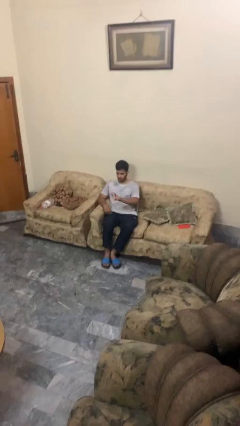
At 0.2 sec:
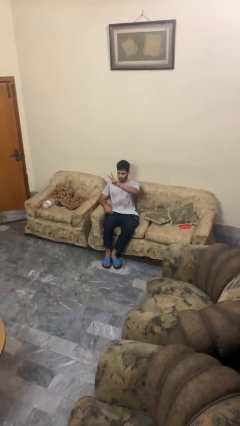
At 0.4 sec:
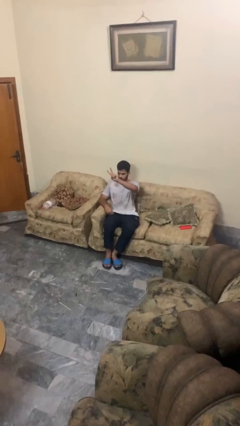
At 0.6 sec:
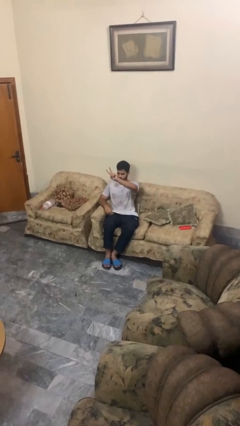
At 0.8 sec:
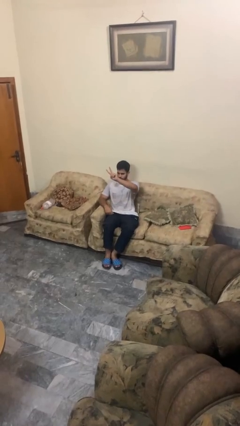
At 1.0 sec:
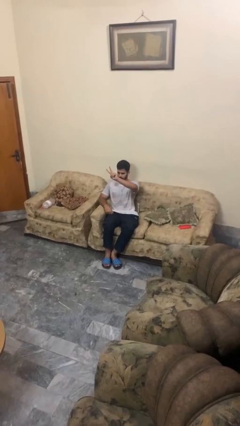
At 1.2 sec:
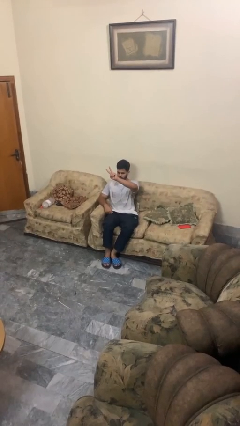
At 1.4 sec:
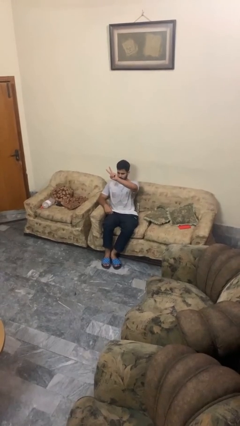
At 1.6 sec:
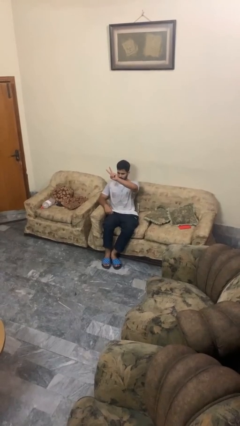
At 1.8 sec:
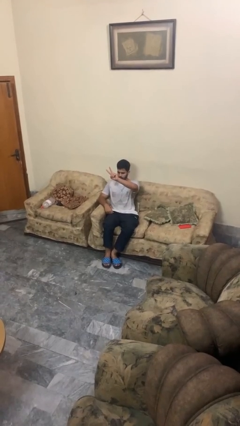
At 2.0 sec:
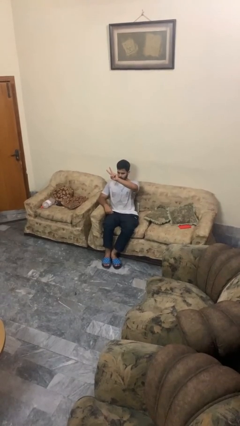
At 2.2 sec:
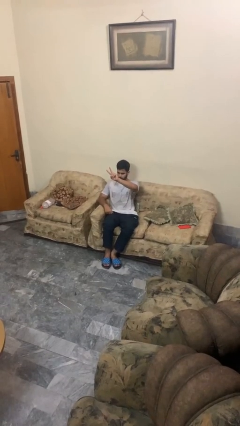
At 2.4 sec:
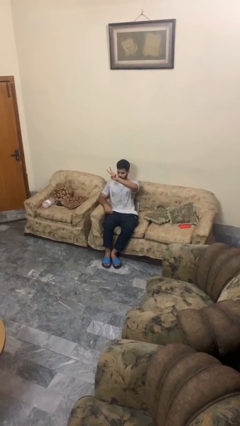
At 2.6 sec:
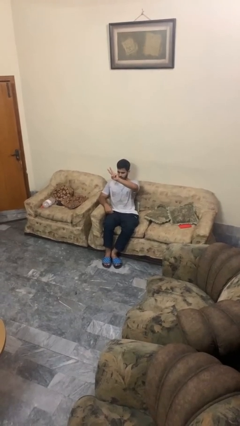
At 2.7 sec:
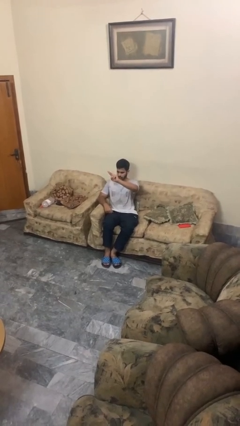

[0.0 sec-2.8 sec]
person gestures peace

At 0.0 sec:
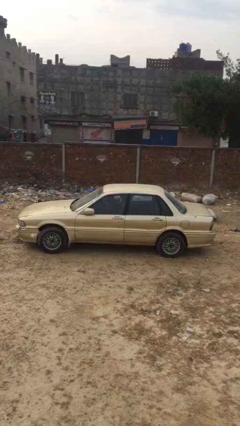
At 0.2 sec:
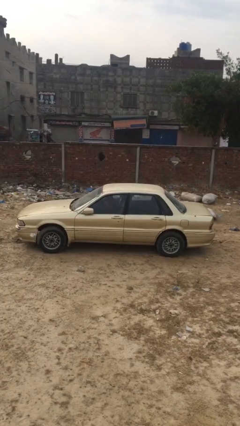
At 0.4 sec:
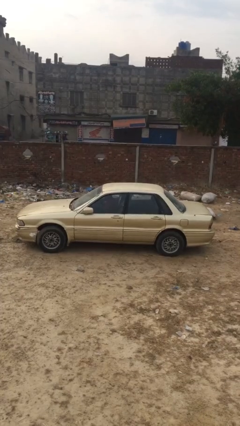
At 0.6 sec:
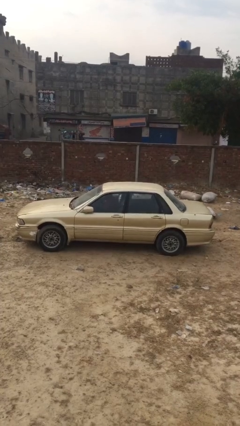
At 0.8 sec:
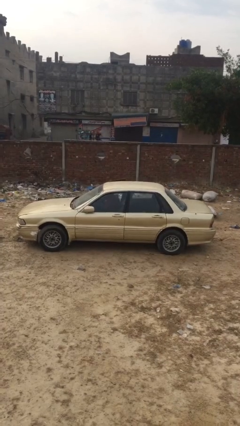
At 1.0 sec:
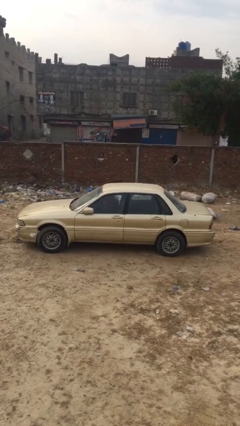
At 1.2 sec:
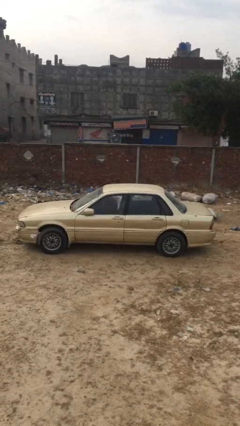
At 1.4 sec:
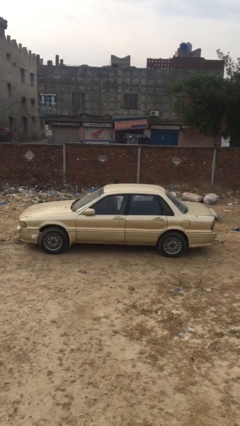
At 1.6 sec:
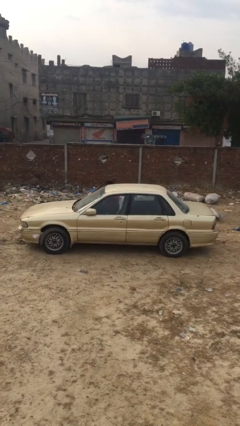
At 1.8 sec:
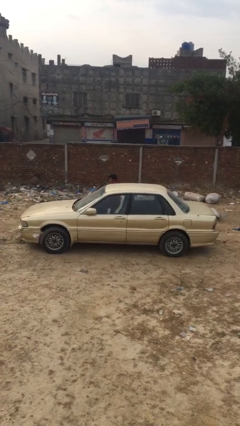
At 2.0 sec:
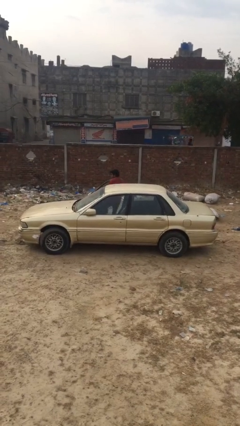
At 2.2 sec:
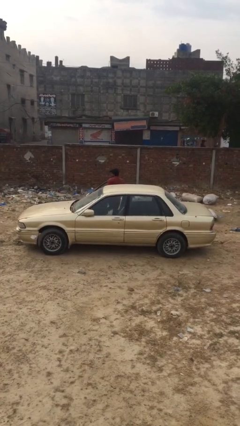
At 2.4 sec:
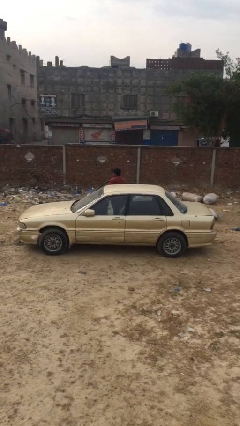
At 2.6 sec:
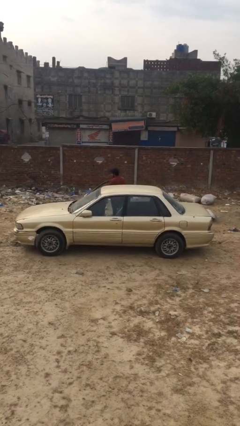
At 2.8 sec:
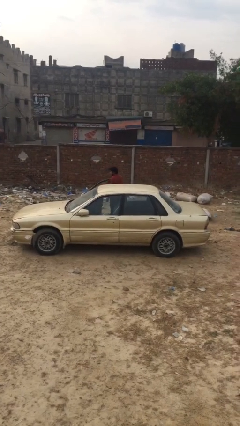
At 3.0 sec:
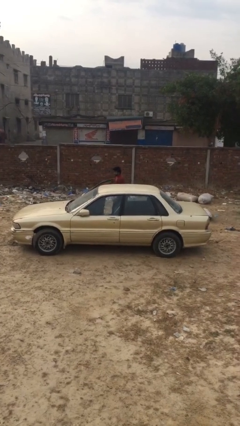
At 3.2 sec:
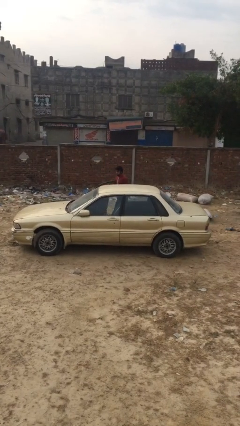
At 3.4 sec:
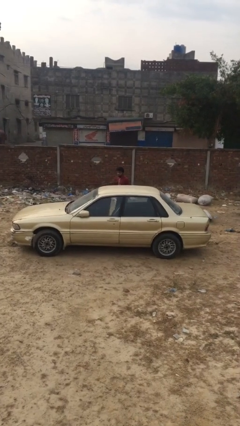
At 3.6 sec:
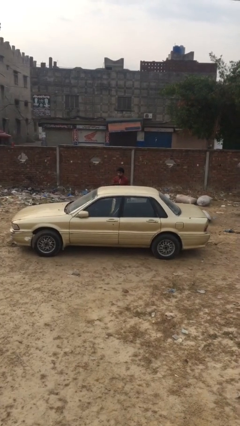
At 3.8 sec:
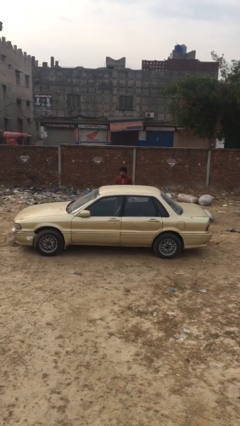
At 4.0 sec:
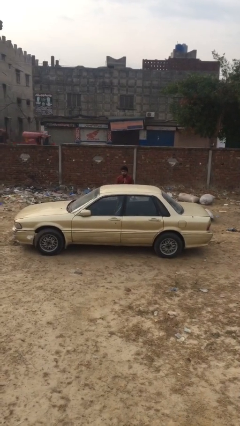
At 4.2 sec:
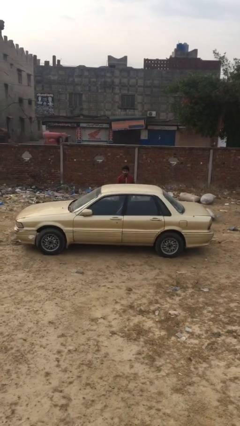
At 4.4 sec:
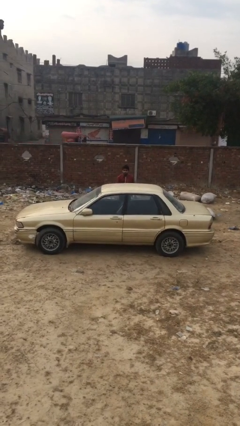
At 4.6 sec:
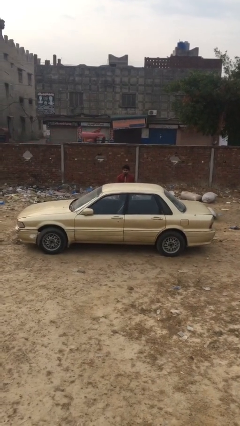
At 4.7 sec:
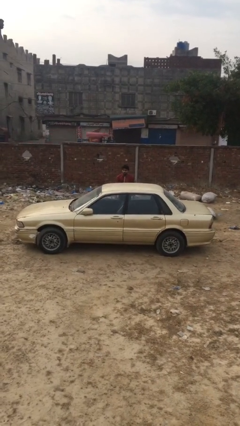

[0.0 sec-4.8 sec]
car drops off person

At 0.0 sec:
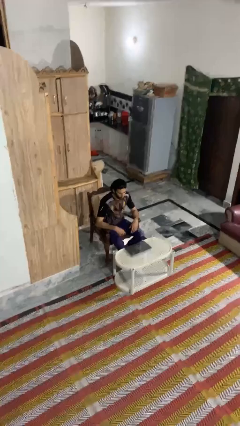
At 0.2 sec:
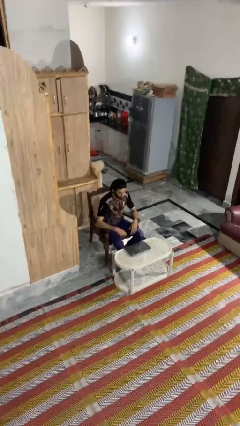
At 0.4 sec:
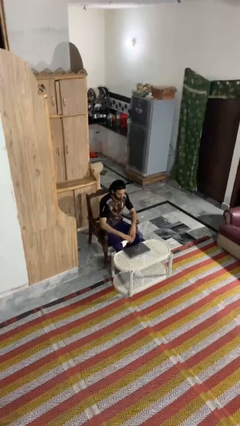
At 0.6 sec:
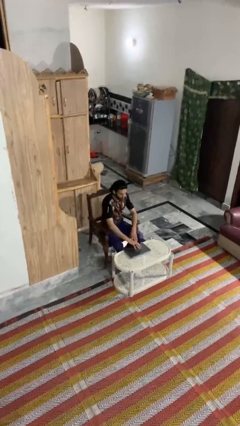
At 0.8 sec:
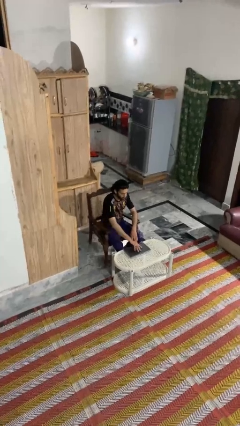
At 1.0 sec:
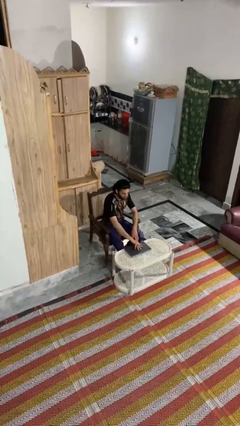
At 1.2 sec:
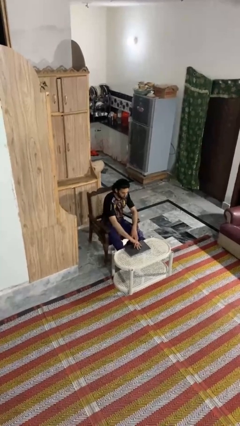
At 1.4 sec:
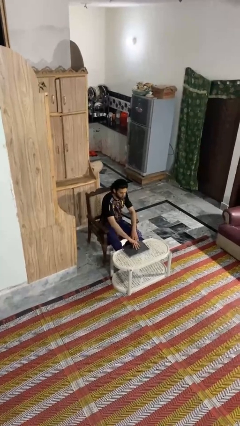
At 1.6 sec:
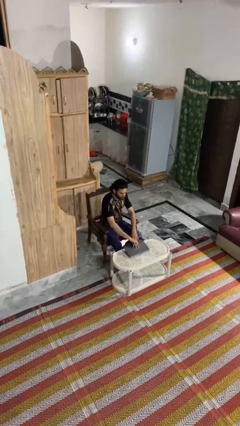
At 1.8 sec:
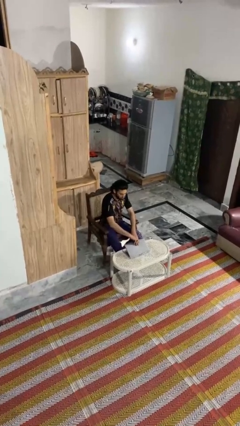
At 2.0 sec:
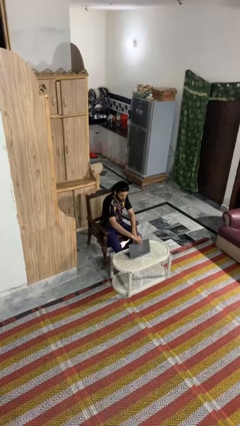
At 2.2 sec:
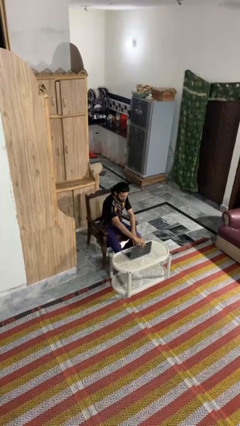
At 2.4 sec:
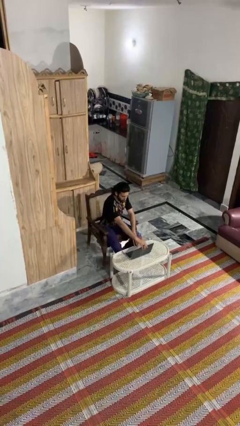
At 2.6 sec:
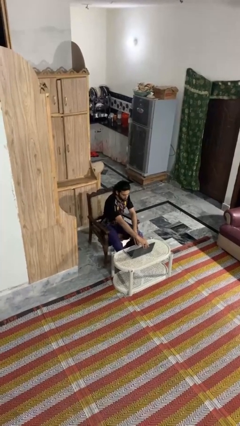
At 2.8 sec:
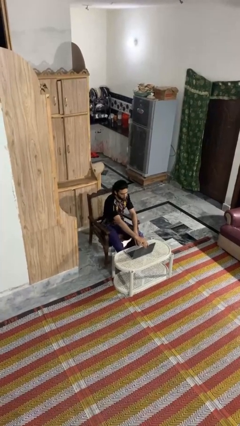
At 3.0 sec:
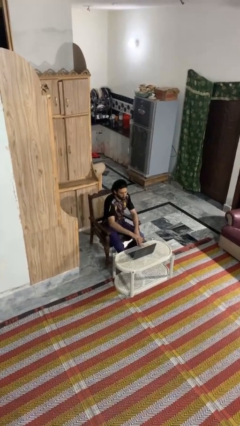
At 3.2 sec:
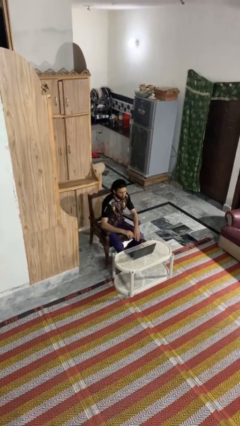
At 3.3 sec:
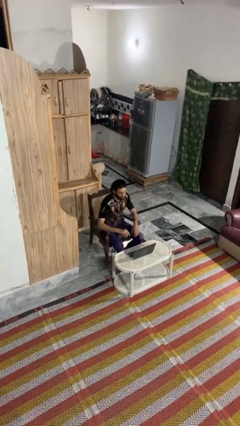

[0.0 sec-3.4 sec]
person opens laptop

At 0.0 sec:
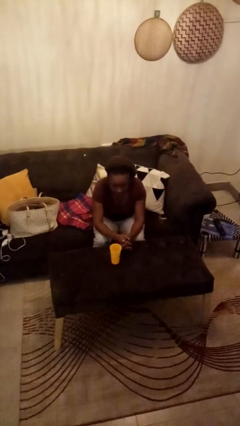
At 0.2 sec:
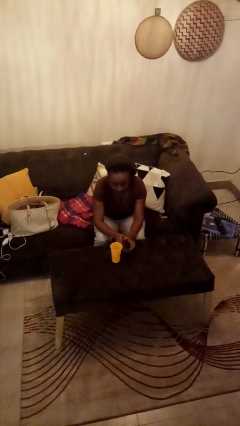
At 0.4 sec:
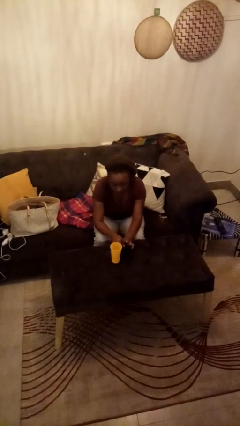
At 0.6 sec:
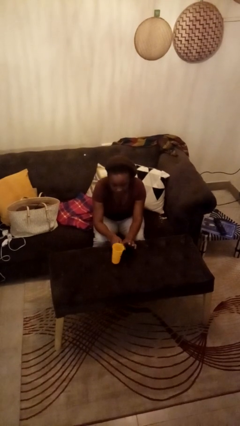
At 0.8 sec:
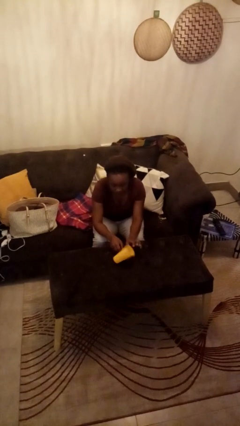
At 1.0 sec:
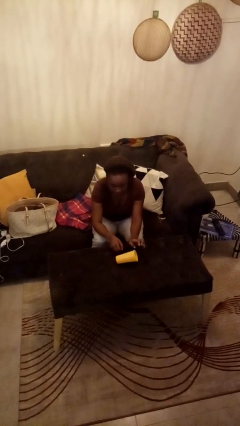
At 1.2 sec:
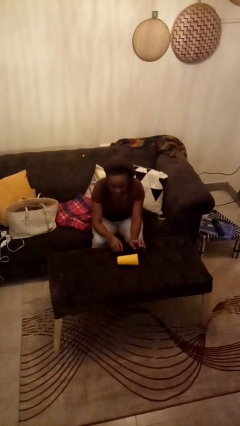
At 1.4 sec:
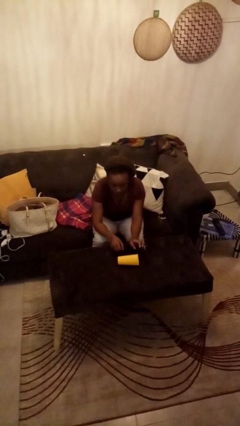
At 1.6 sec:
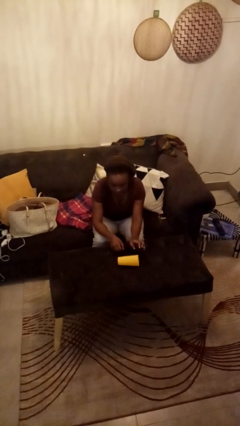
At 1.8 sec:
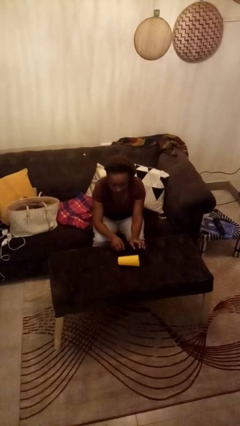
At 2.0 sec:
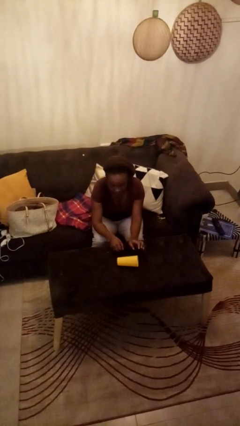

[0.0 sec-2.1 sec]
person knocks over glass

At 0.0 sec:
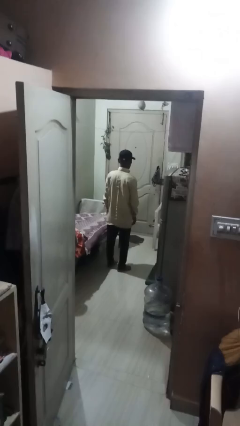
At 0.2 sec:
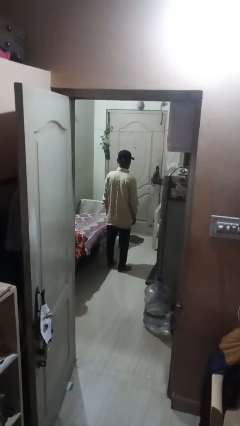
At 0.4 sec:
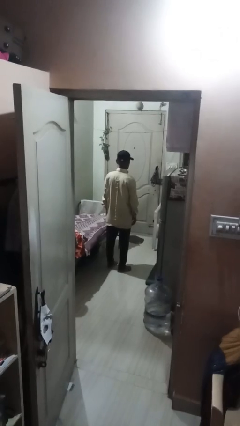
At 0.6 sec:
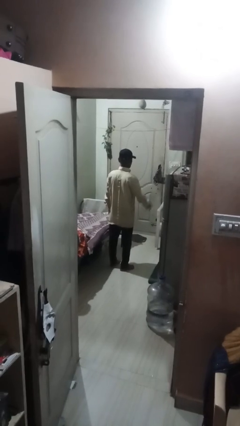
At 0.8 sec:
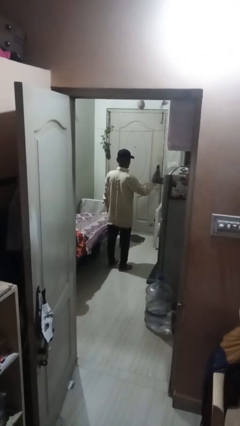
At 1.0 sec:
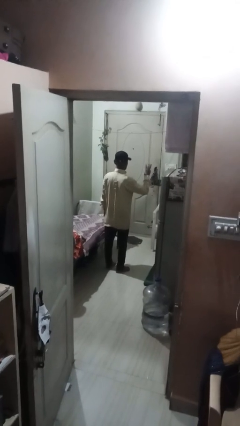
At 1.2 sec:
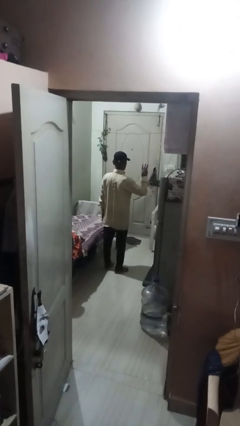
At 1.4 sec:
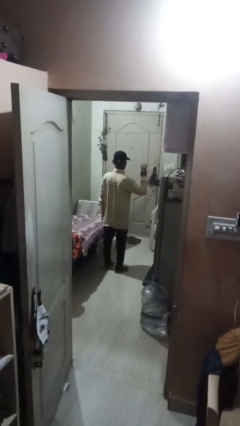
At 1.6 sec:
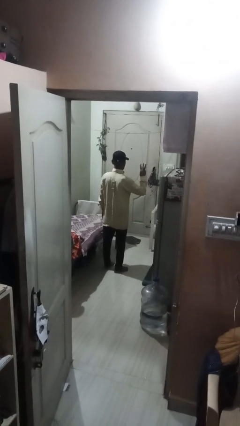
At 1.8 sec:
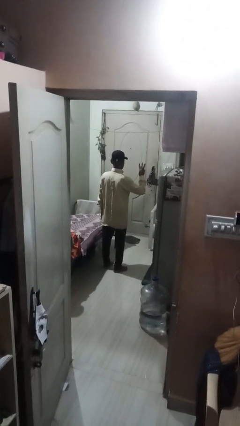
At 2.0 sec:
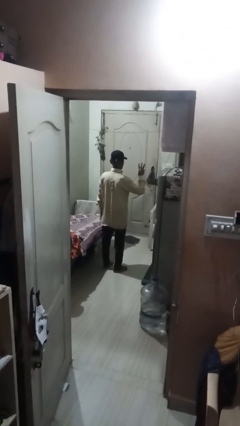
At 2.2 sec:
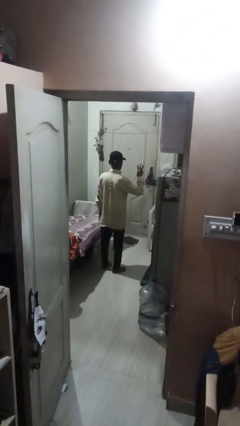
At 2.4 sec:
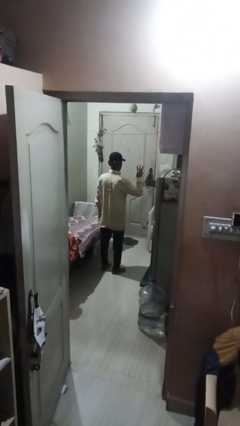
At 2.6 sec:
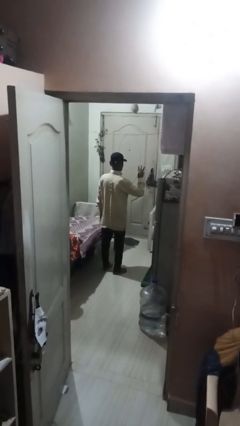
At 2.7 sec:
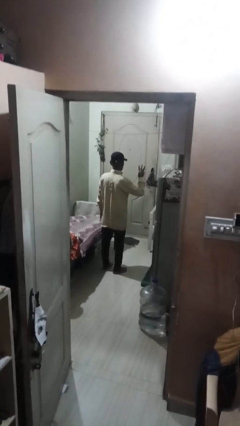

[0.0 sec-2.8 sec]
person gestures number three

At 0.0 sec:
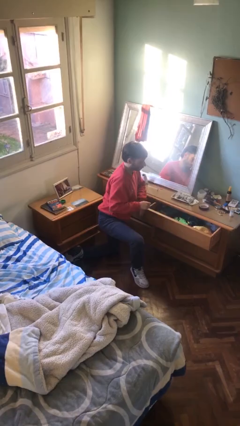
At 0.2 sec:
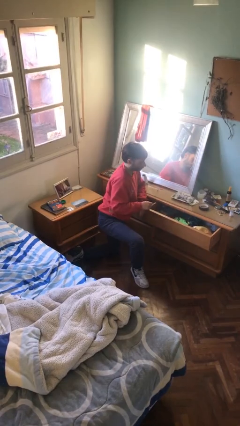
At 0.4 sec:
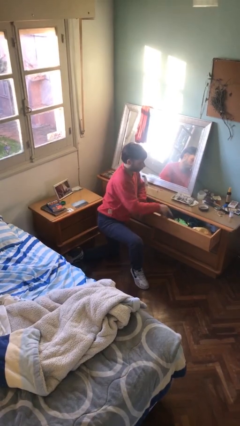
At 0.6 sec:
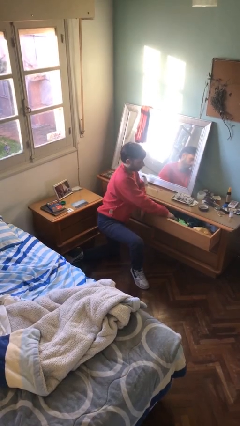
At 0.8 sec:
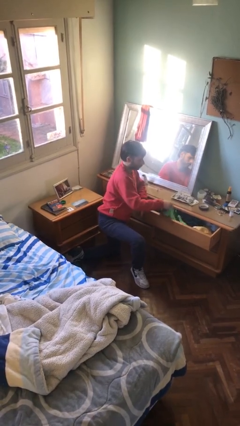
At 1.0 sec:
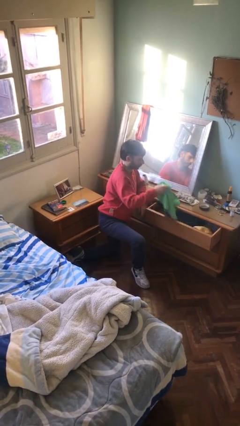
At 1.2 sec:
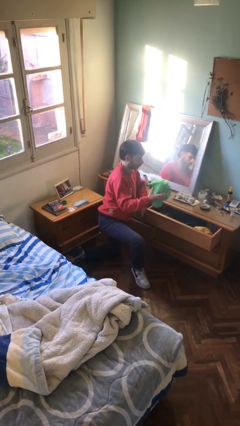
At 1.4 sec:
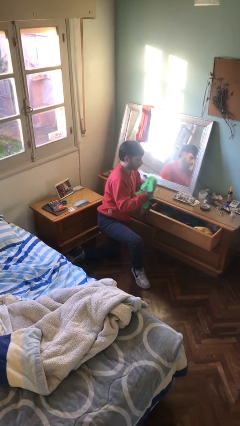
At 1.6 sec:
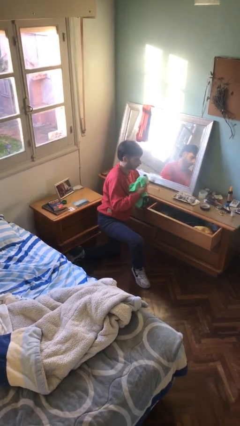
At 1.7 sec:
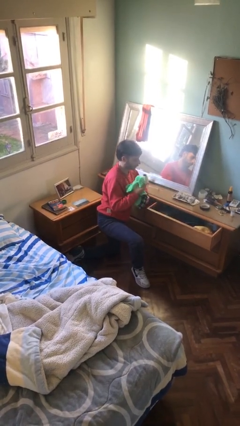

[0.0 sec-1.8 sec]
person takes clothes from dresser
